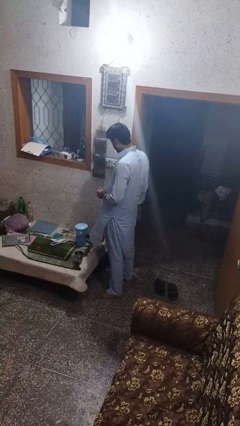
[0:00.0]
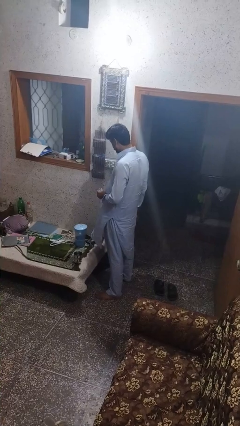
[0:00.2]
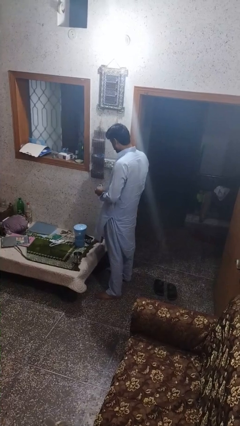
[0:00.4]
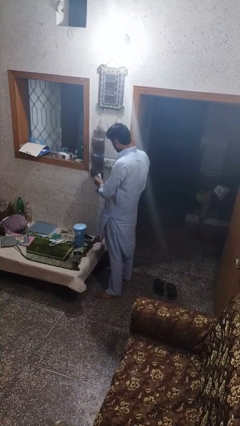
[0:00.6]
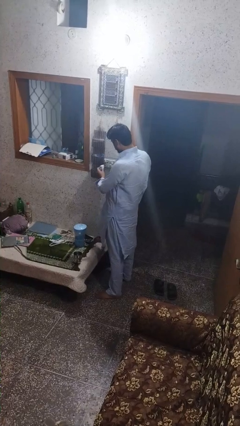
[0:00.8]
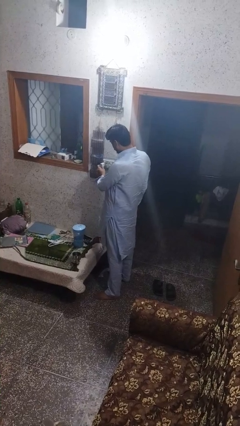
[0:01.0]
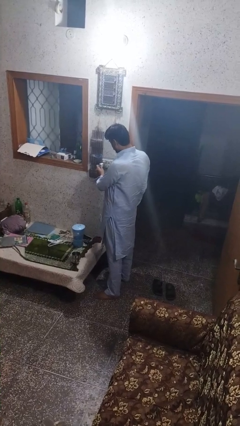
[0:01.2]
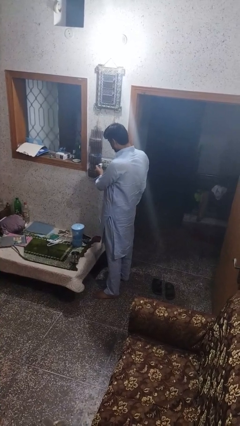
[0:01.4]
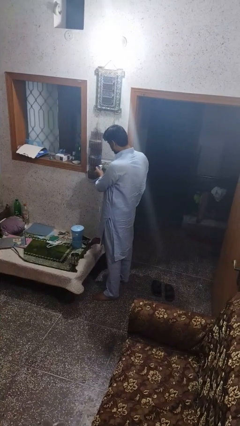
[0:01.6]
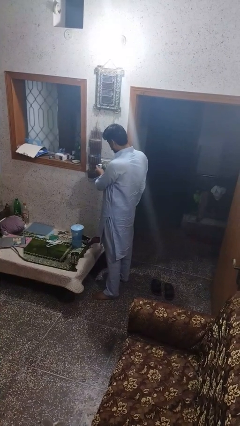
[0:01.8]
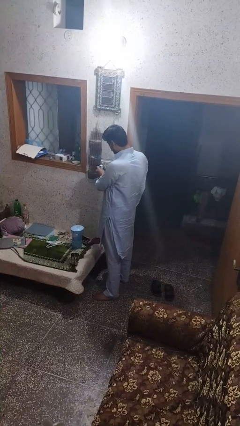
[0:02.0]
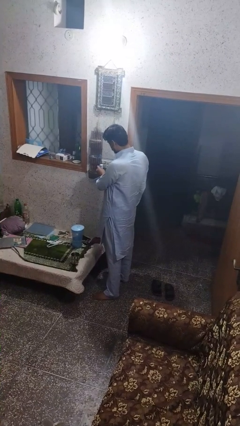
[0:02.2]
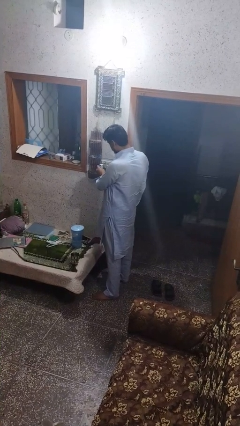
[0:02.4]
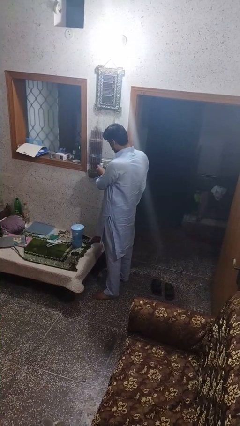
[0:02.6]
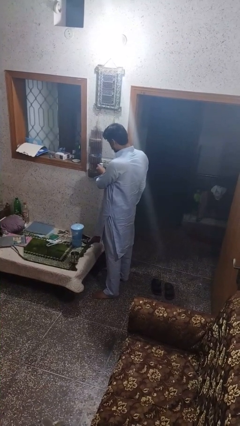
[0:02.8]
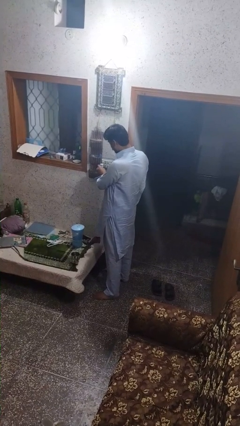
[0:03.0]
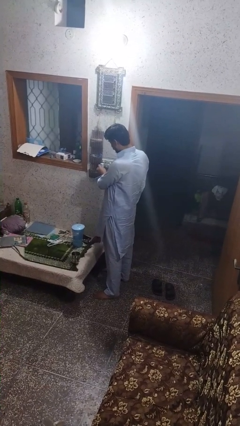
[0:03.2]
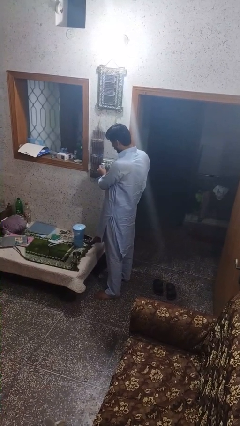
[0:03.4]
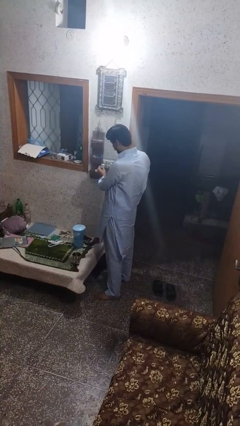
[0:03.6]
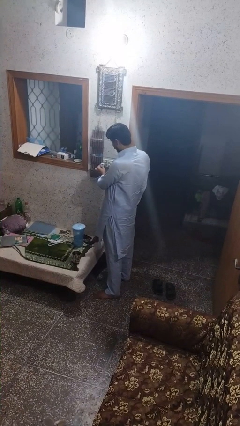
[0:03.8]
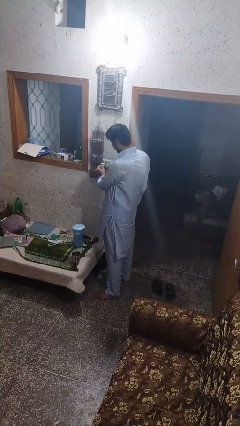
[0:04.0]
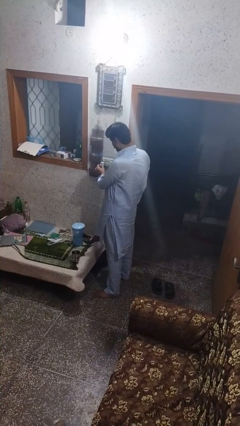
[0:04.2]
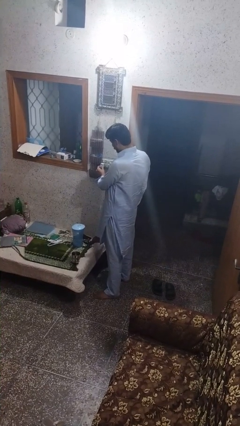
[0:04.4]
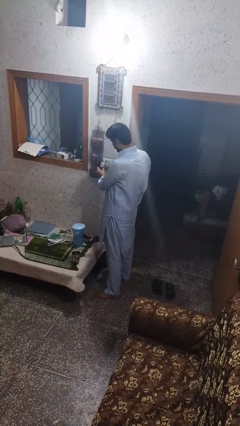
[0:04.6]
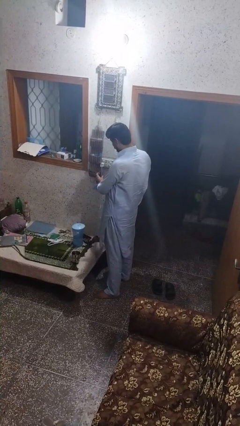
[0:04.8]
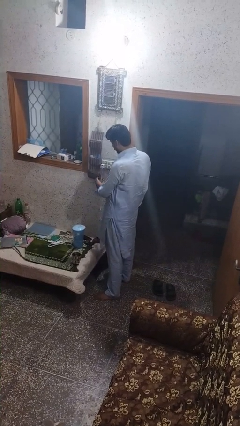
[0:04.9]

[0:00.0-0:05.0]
person plugs into electrical socket

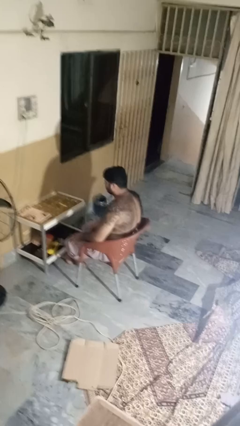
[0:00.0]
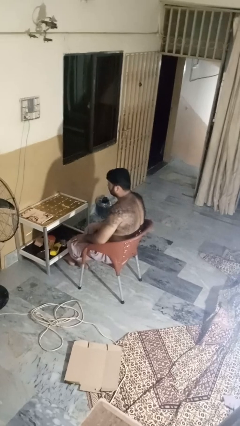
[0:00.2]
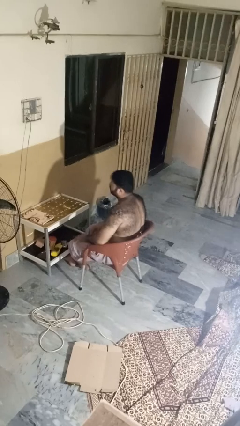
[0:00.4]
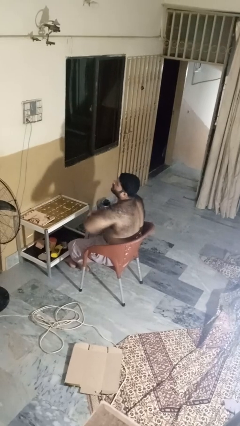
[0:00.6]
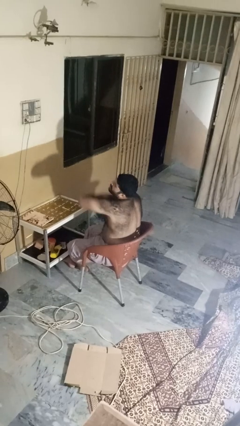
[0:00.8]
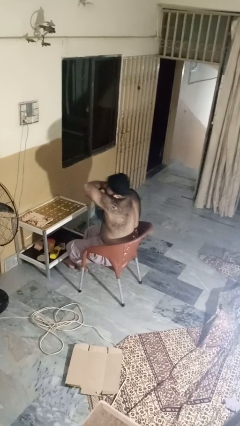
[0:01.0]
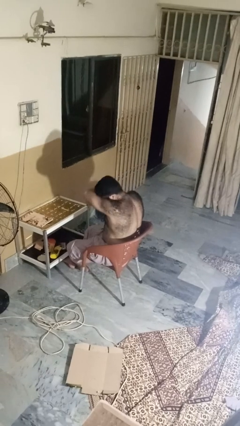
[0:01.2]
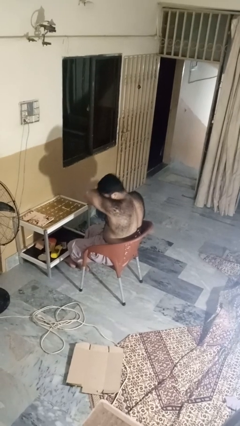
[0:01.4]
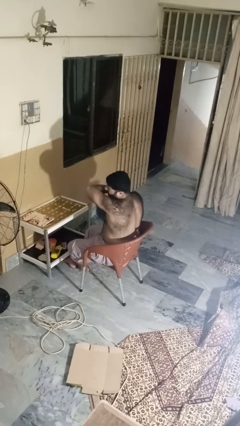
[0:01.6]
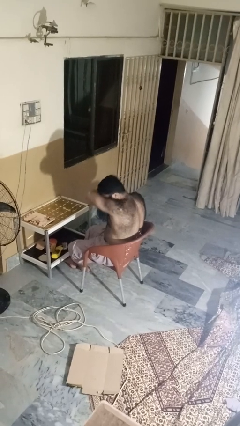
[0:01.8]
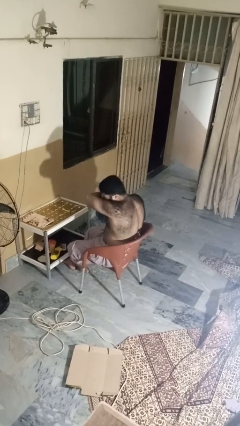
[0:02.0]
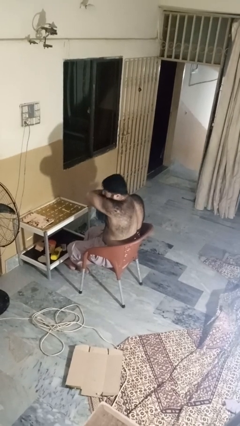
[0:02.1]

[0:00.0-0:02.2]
person sneezes into arm

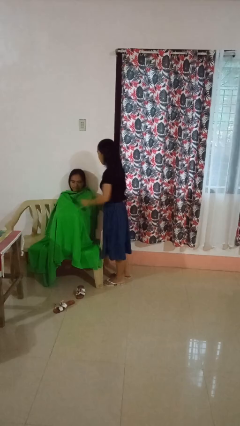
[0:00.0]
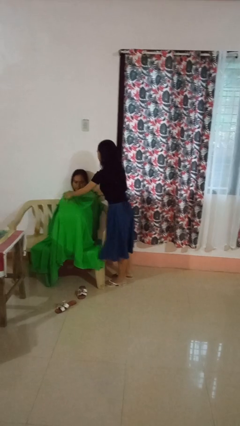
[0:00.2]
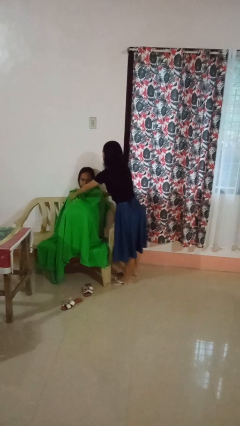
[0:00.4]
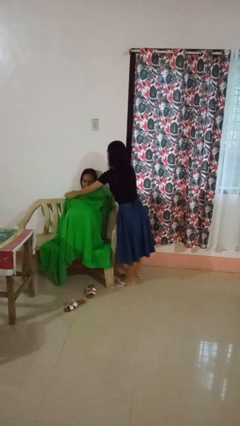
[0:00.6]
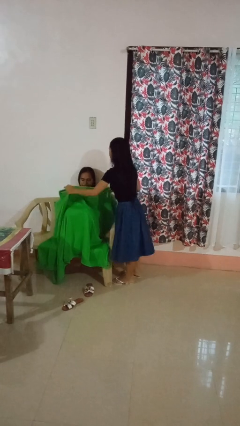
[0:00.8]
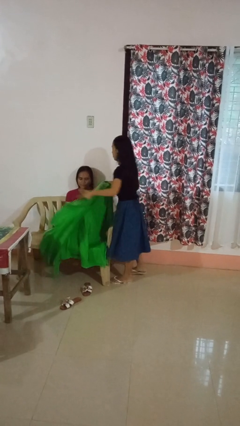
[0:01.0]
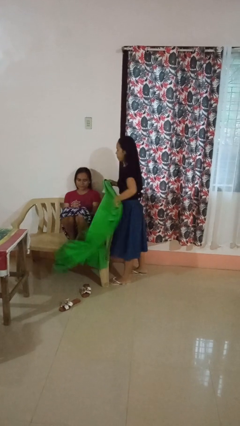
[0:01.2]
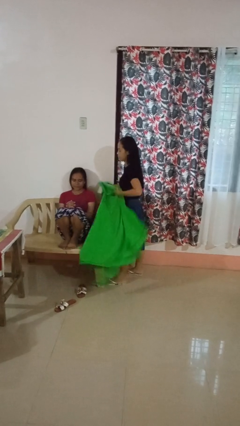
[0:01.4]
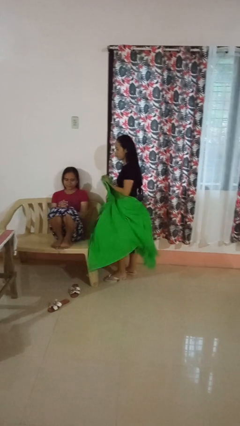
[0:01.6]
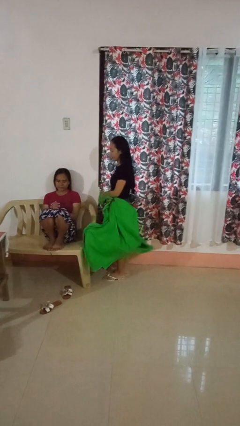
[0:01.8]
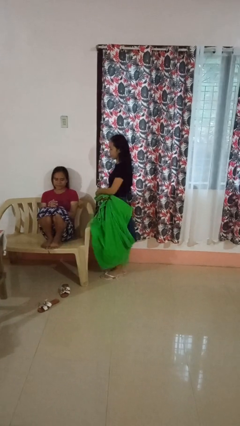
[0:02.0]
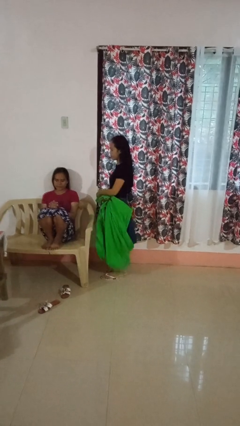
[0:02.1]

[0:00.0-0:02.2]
person uncovers friend with blanket

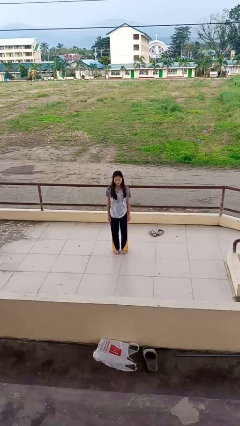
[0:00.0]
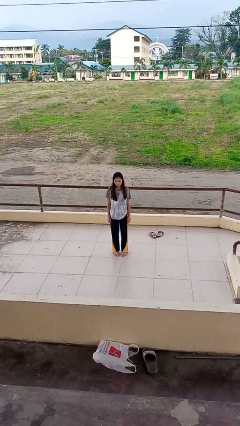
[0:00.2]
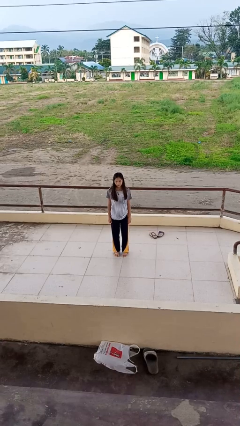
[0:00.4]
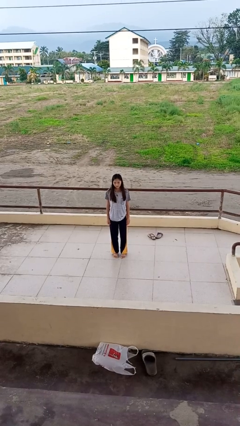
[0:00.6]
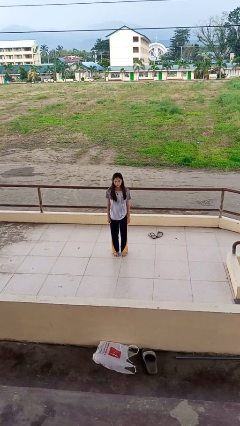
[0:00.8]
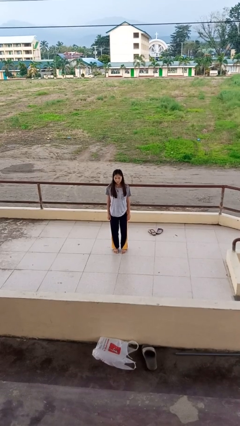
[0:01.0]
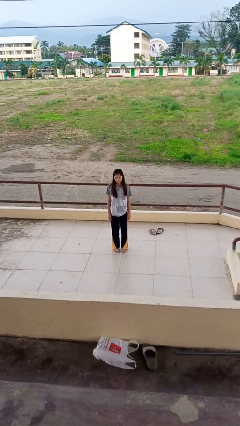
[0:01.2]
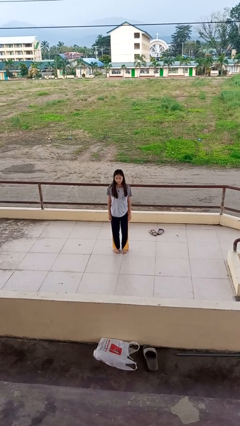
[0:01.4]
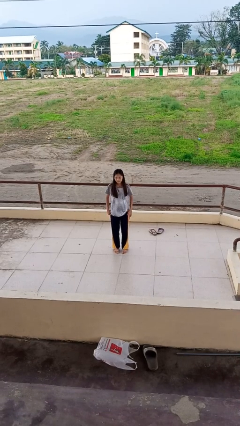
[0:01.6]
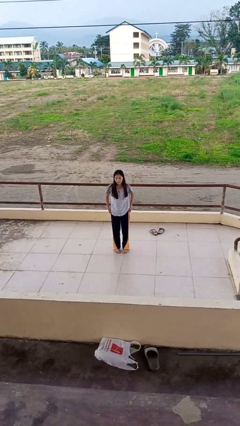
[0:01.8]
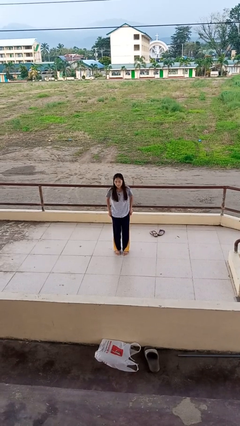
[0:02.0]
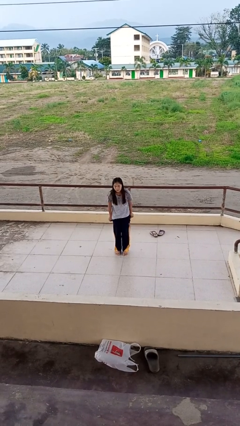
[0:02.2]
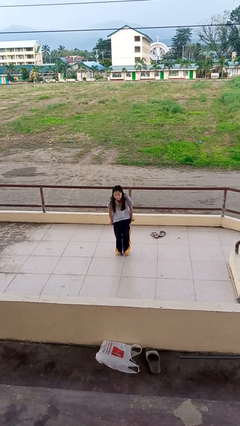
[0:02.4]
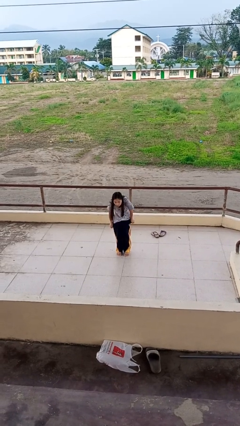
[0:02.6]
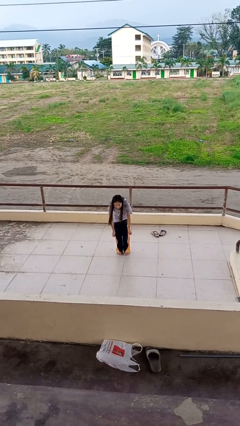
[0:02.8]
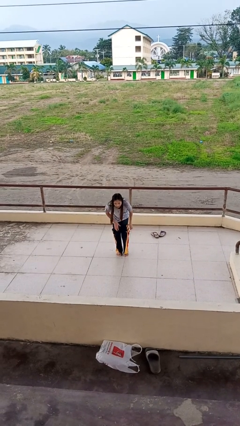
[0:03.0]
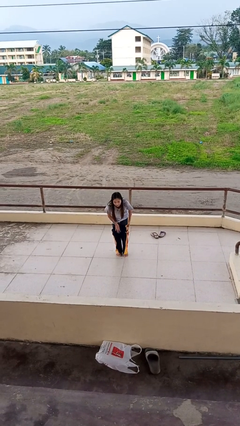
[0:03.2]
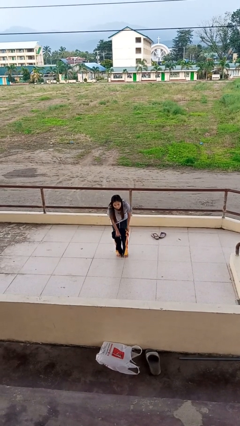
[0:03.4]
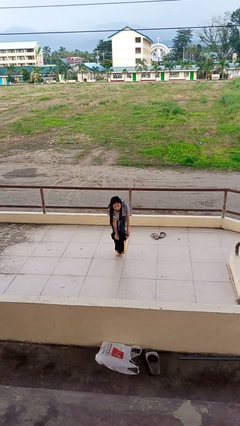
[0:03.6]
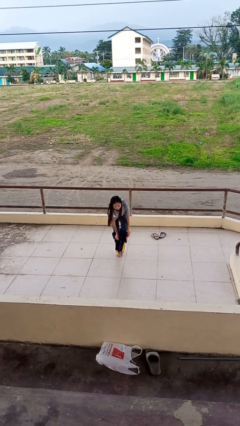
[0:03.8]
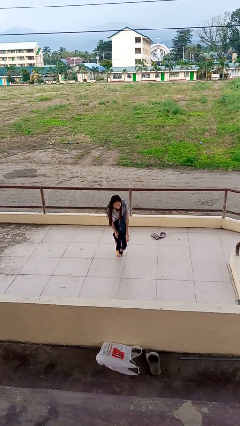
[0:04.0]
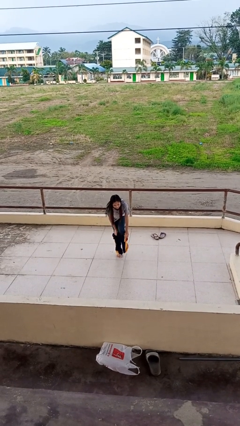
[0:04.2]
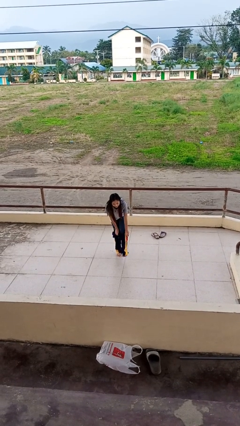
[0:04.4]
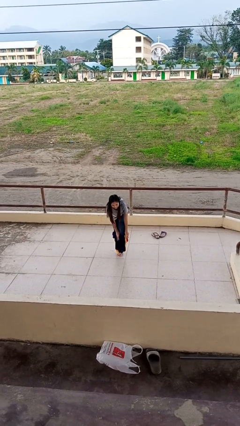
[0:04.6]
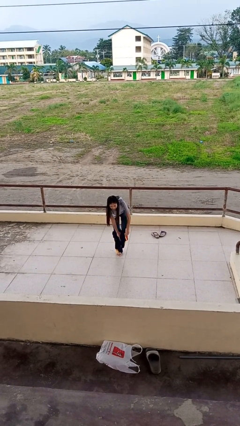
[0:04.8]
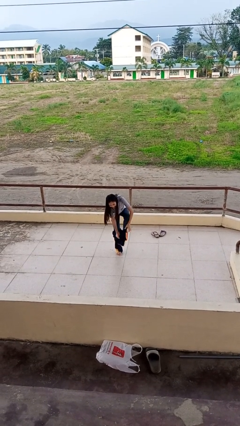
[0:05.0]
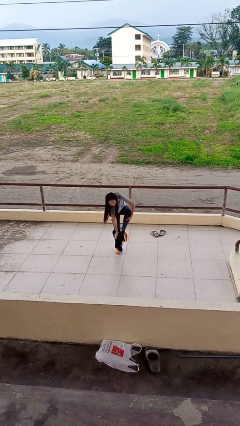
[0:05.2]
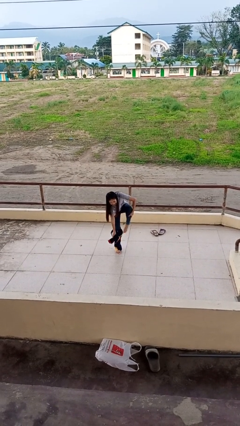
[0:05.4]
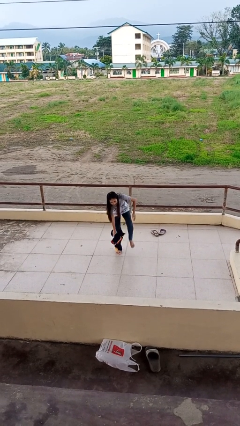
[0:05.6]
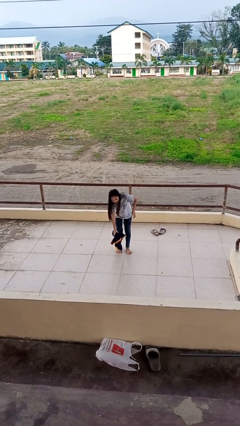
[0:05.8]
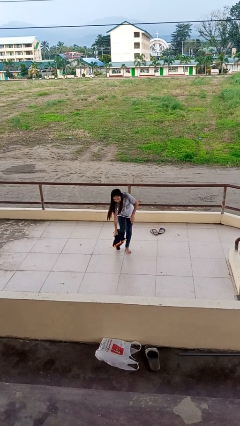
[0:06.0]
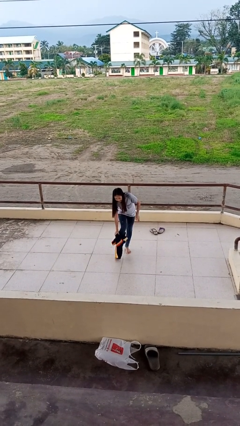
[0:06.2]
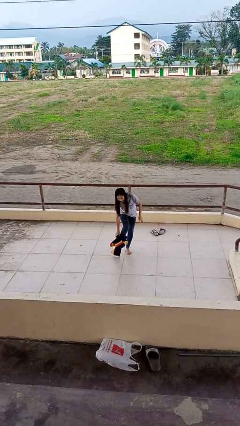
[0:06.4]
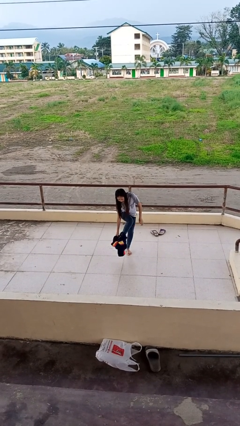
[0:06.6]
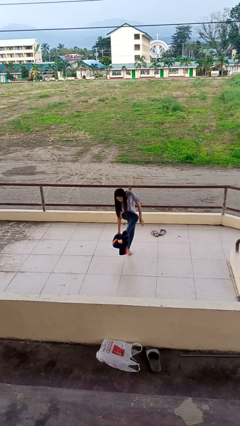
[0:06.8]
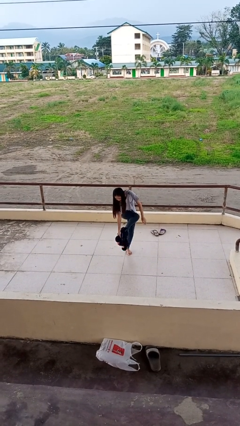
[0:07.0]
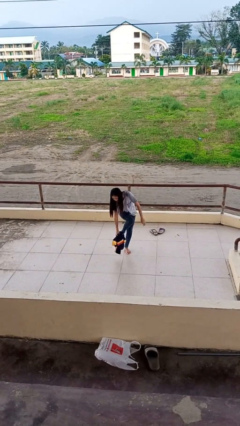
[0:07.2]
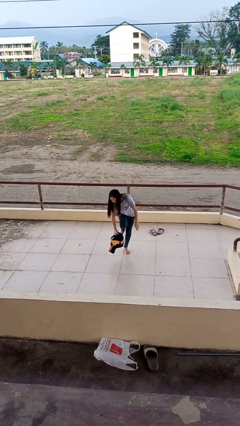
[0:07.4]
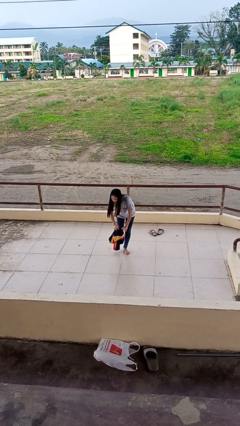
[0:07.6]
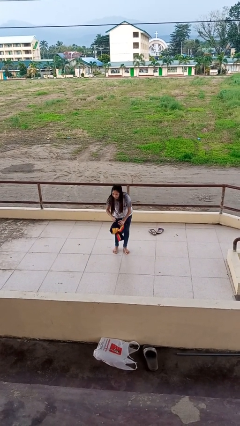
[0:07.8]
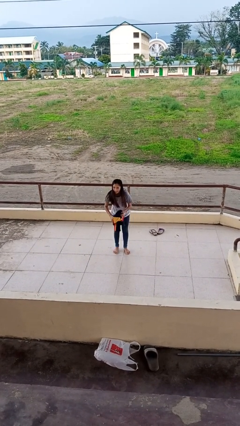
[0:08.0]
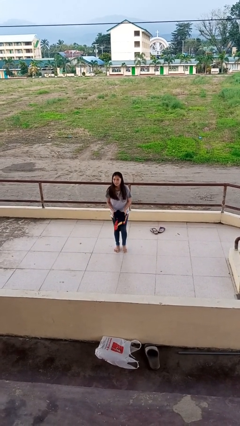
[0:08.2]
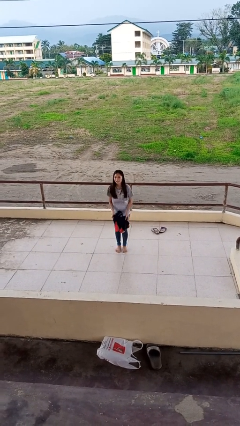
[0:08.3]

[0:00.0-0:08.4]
person takes off pants
